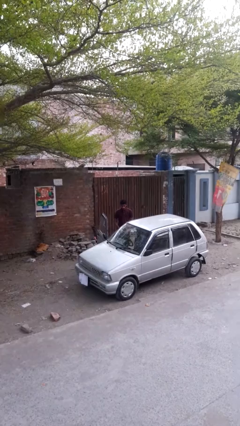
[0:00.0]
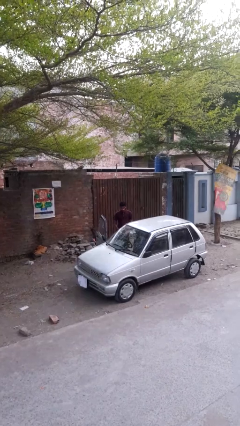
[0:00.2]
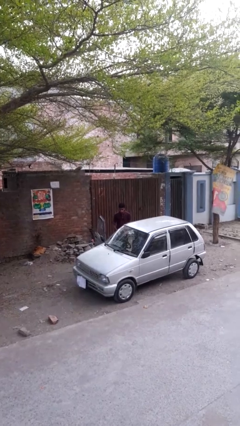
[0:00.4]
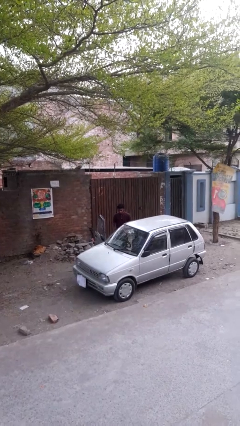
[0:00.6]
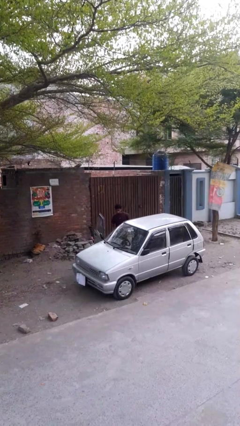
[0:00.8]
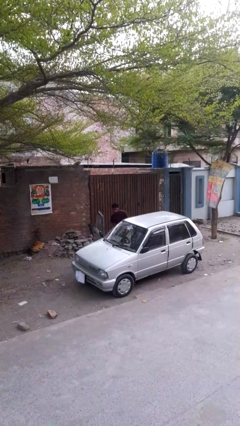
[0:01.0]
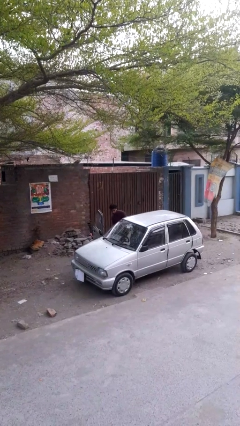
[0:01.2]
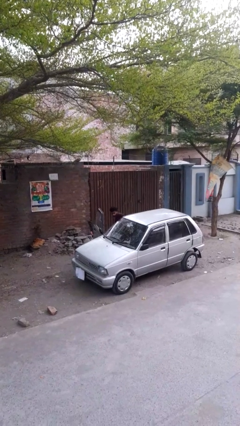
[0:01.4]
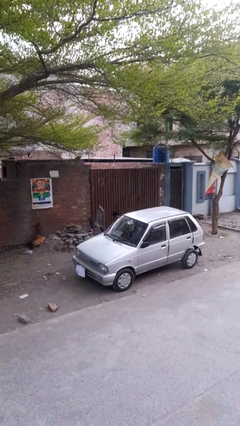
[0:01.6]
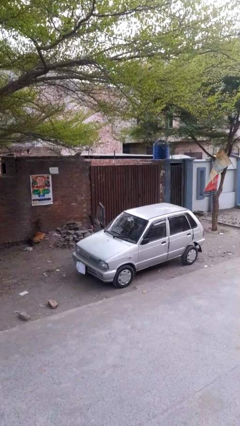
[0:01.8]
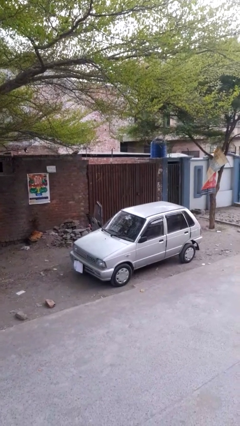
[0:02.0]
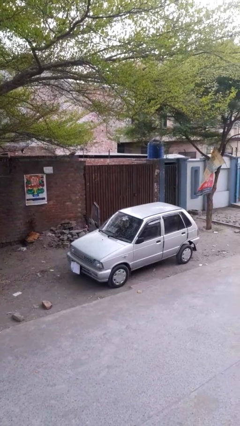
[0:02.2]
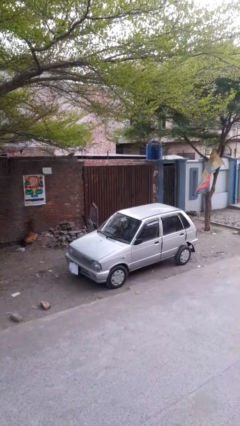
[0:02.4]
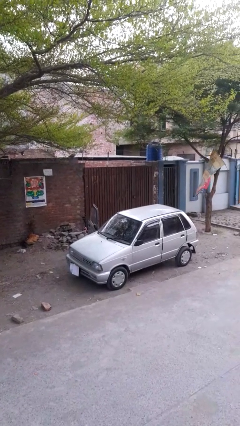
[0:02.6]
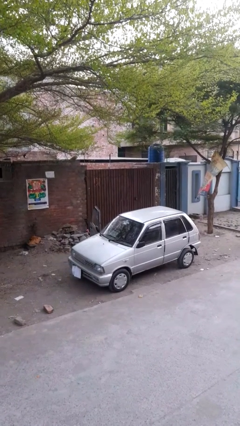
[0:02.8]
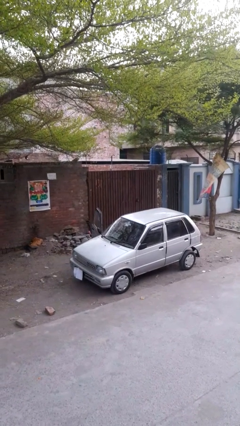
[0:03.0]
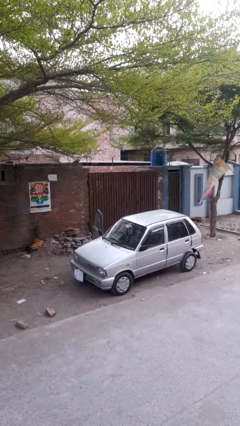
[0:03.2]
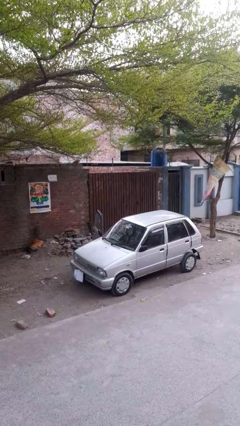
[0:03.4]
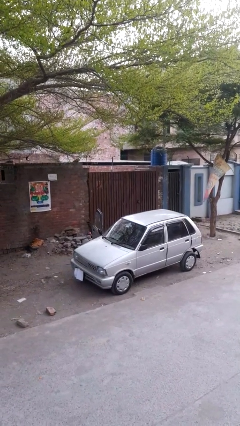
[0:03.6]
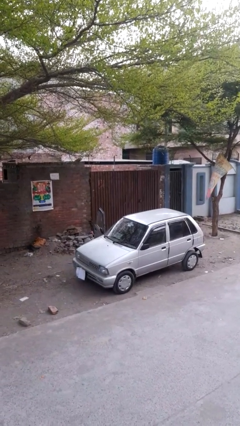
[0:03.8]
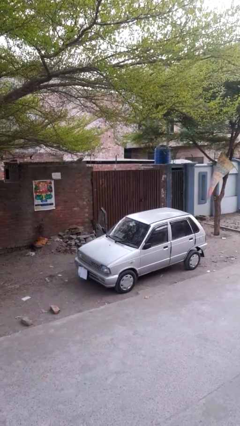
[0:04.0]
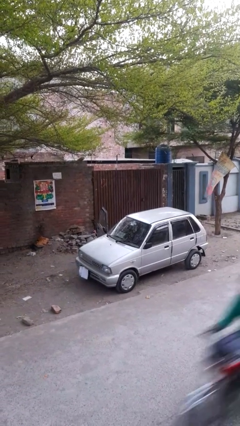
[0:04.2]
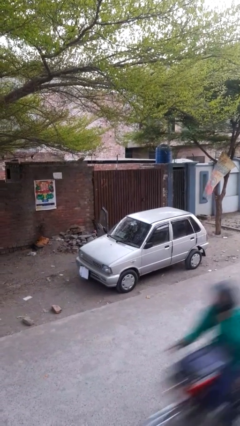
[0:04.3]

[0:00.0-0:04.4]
person enters car

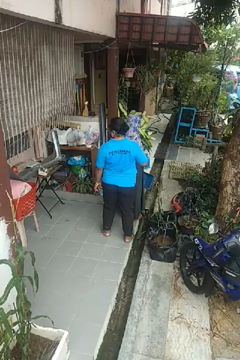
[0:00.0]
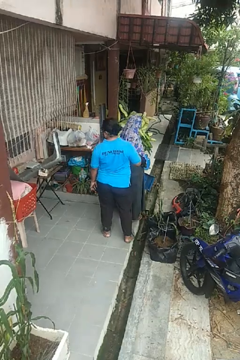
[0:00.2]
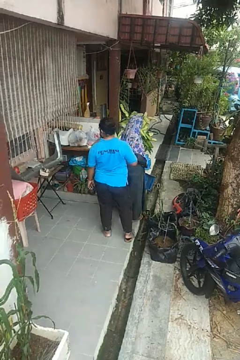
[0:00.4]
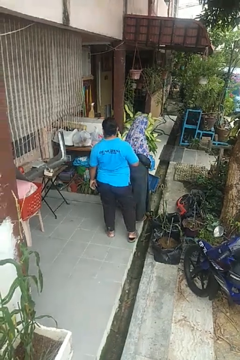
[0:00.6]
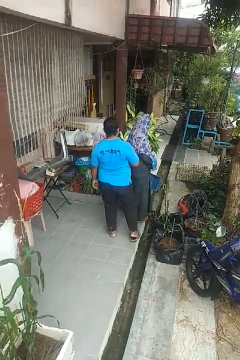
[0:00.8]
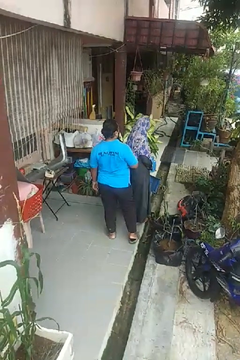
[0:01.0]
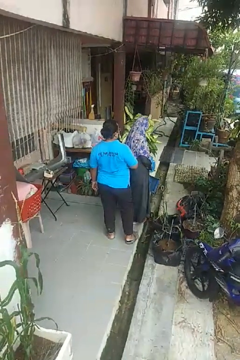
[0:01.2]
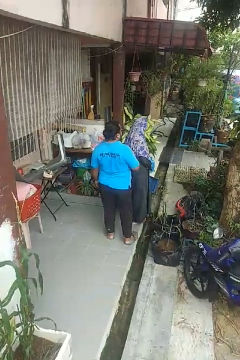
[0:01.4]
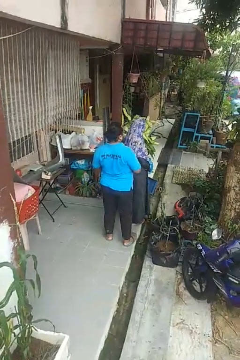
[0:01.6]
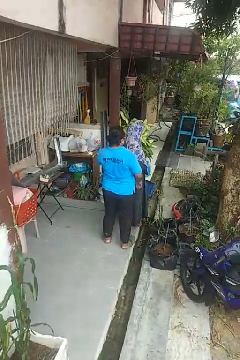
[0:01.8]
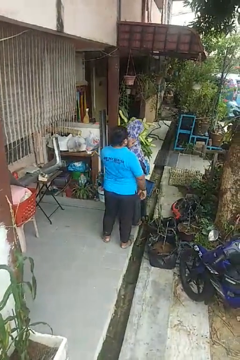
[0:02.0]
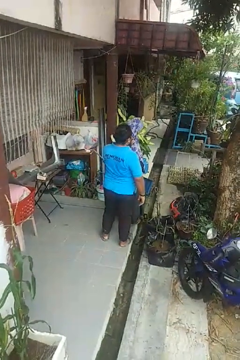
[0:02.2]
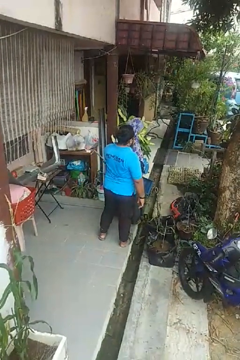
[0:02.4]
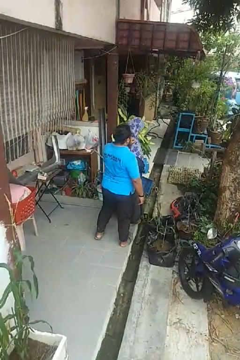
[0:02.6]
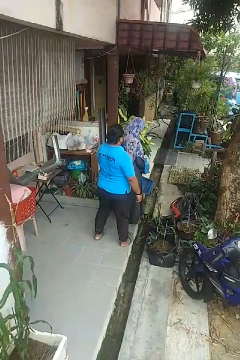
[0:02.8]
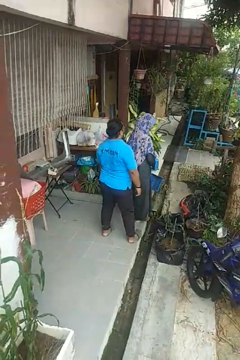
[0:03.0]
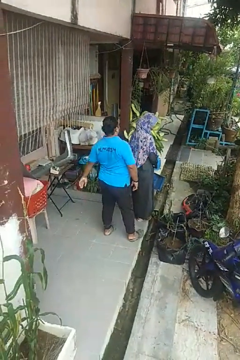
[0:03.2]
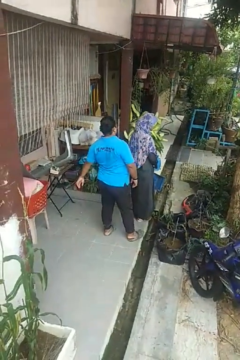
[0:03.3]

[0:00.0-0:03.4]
person touches back of person

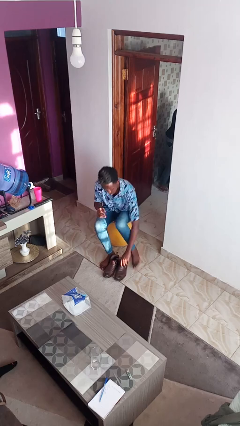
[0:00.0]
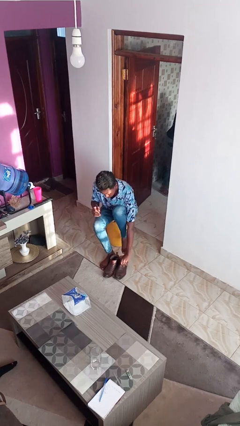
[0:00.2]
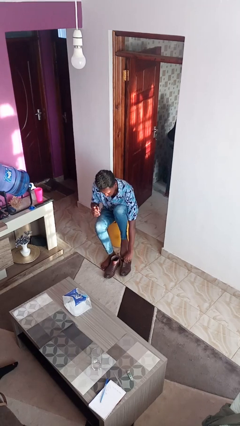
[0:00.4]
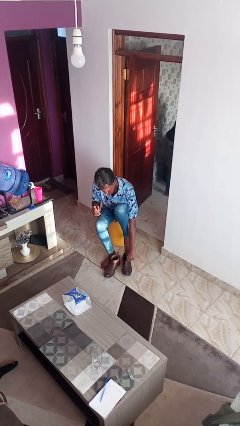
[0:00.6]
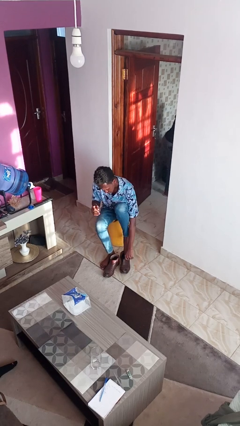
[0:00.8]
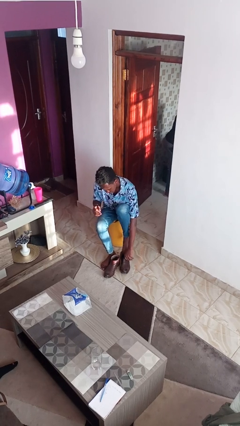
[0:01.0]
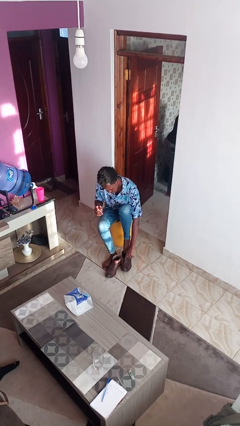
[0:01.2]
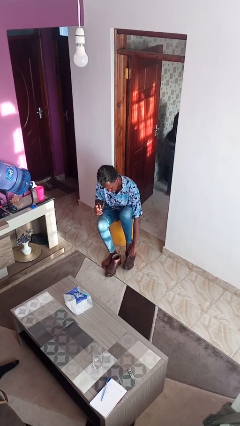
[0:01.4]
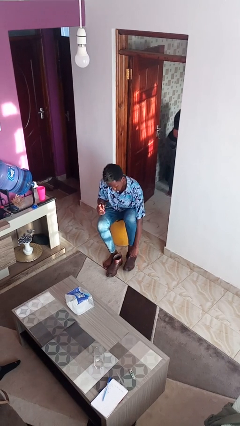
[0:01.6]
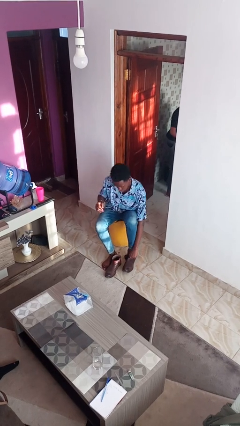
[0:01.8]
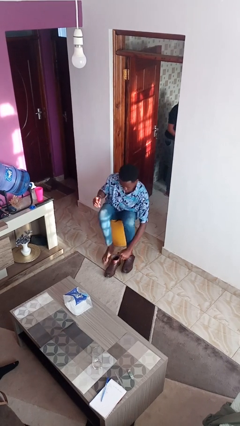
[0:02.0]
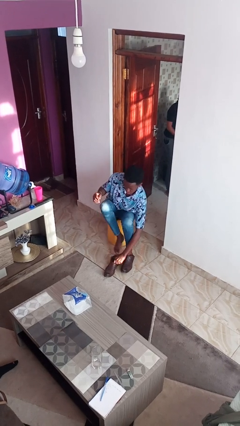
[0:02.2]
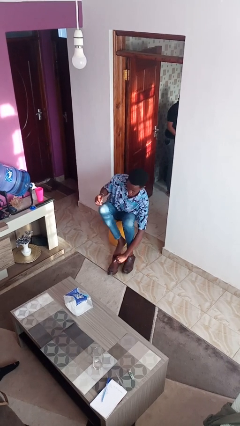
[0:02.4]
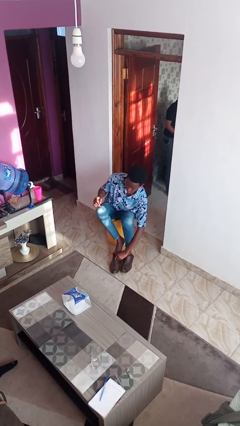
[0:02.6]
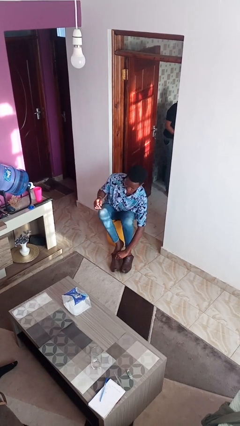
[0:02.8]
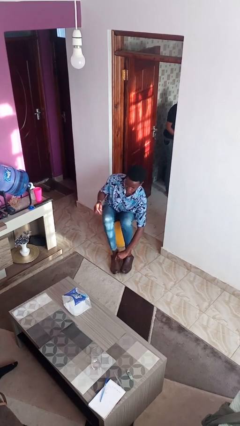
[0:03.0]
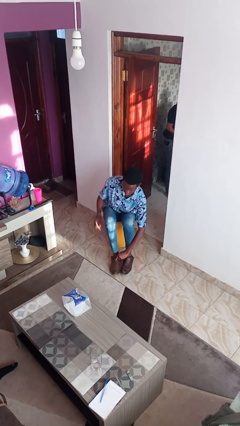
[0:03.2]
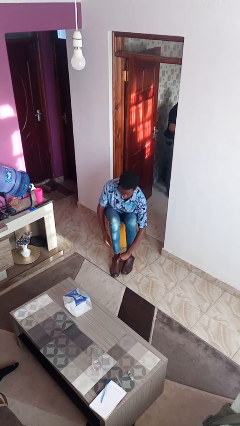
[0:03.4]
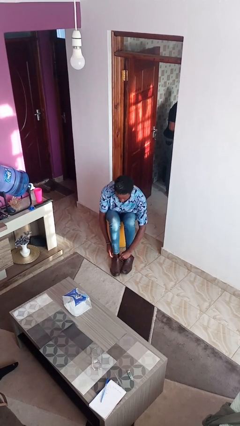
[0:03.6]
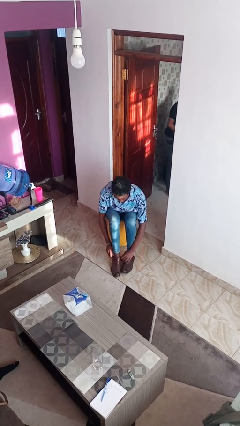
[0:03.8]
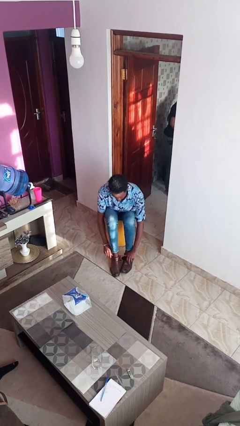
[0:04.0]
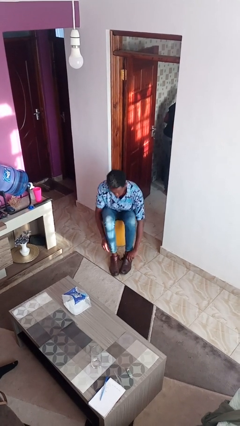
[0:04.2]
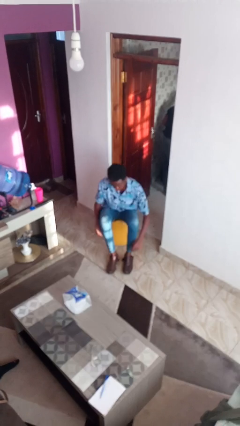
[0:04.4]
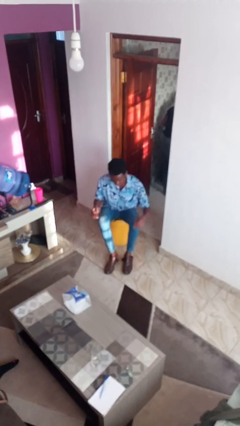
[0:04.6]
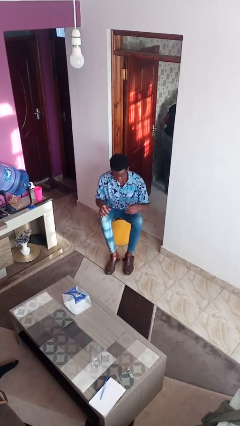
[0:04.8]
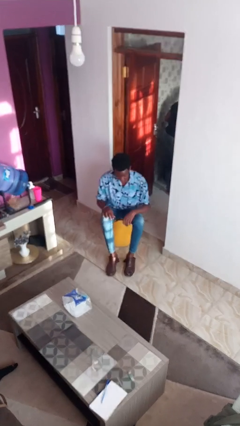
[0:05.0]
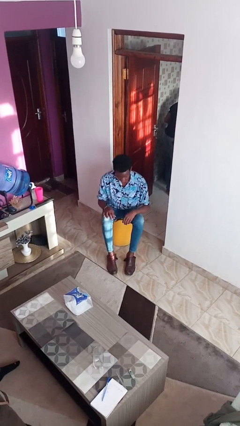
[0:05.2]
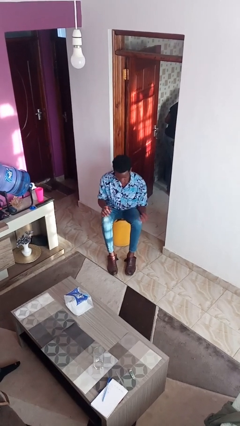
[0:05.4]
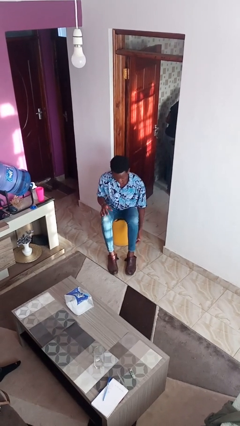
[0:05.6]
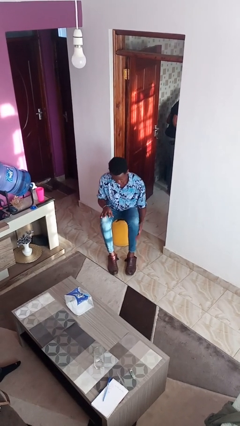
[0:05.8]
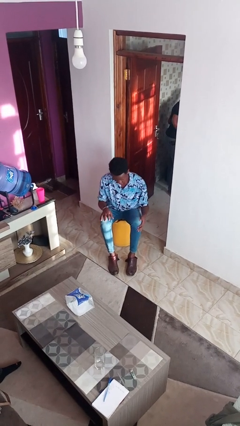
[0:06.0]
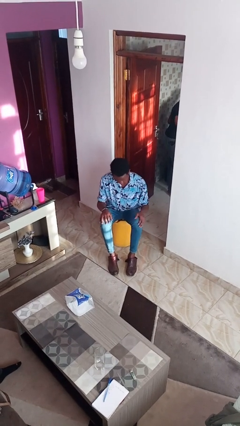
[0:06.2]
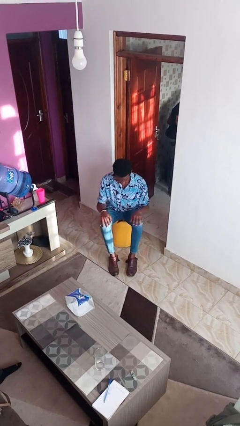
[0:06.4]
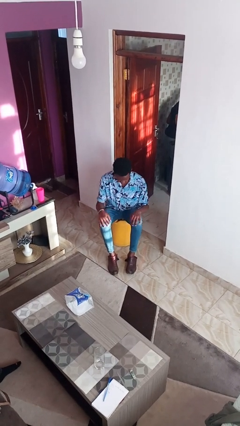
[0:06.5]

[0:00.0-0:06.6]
person puts on boots

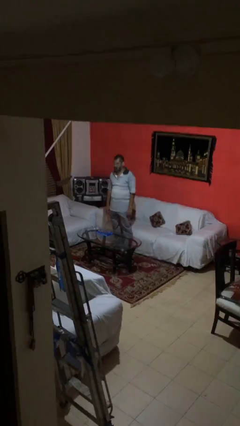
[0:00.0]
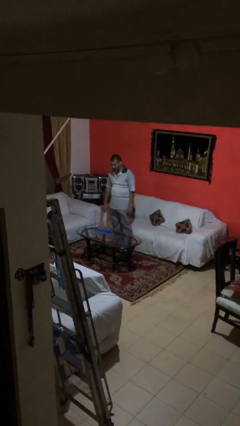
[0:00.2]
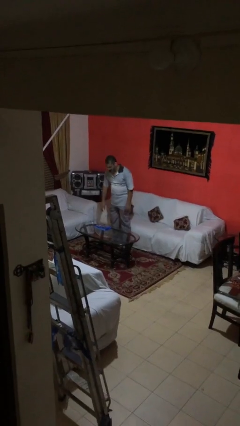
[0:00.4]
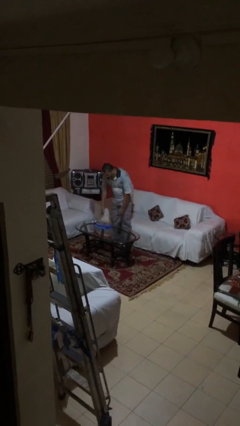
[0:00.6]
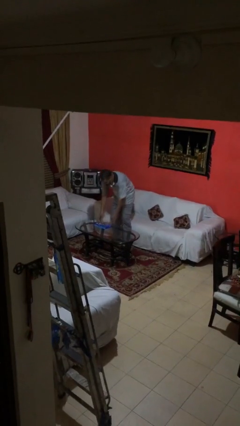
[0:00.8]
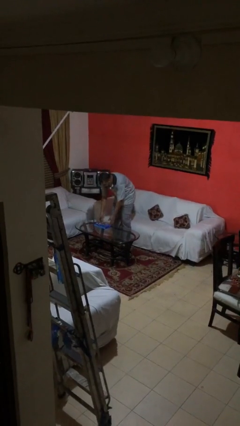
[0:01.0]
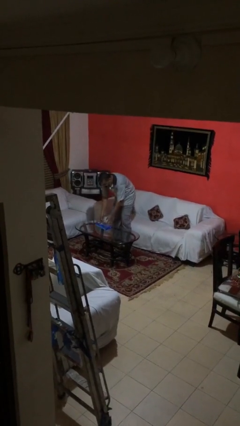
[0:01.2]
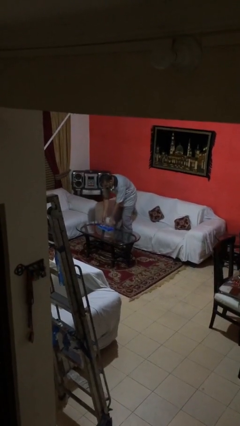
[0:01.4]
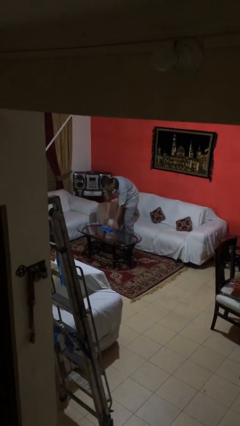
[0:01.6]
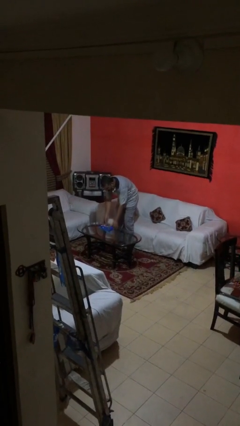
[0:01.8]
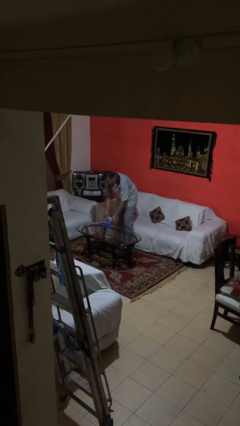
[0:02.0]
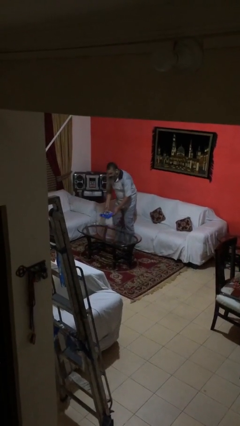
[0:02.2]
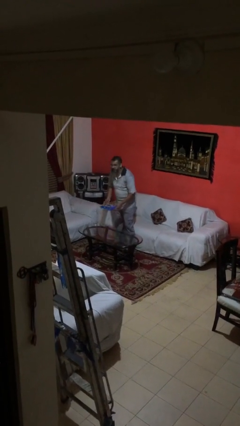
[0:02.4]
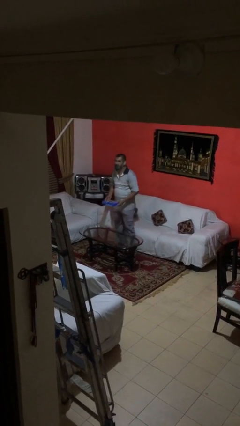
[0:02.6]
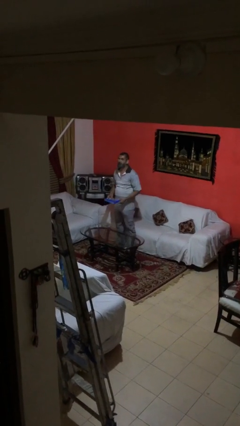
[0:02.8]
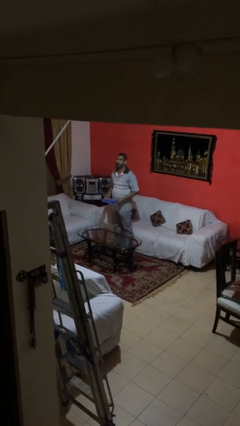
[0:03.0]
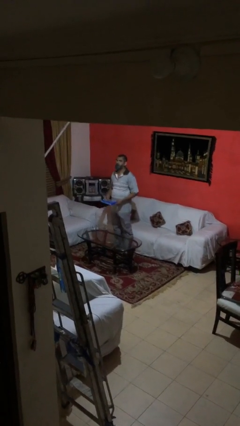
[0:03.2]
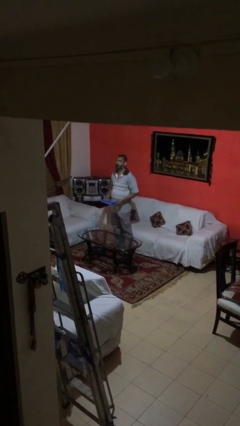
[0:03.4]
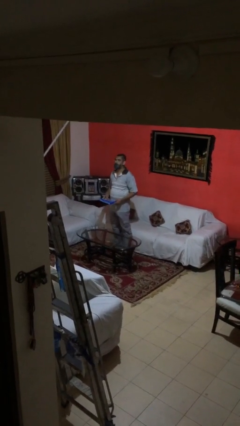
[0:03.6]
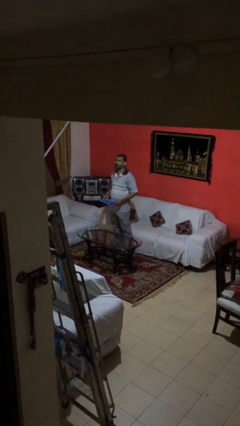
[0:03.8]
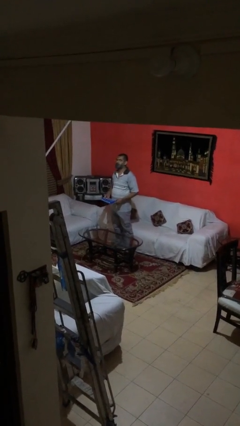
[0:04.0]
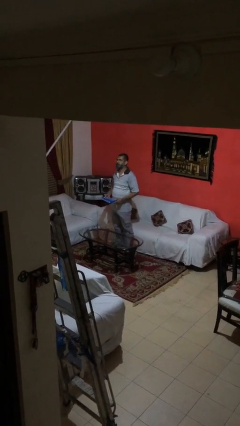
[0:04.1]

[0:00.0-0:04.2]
person picks up object from table
